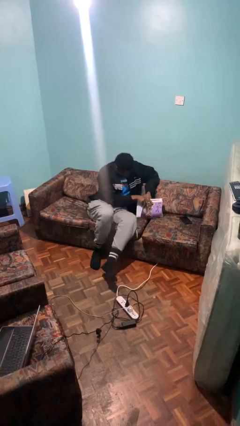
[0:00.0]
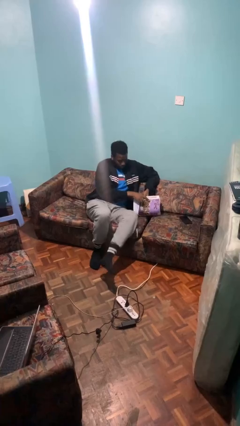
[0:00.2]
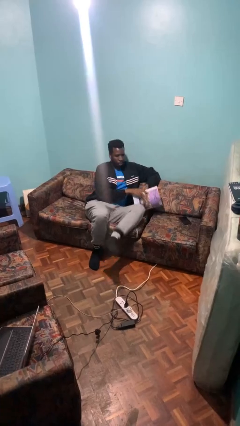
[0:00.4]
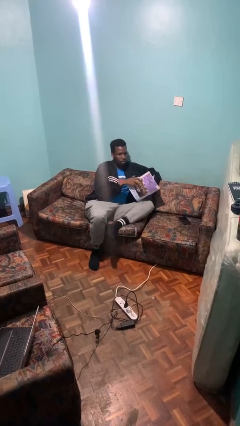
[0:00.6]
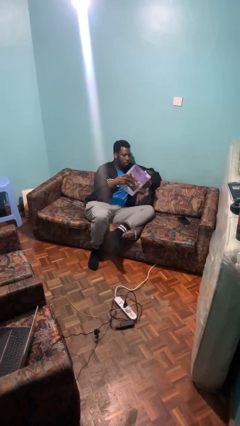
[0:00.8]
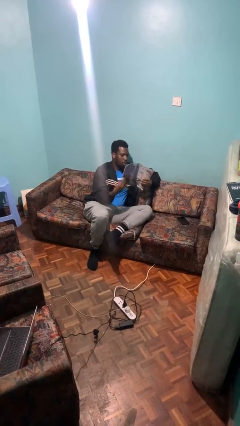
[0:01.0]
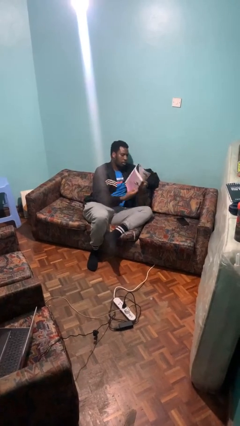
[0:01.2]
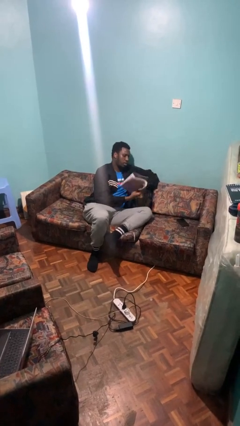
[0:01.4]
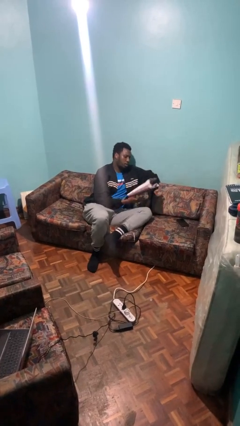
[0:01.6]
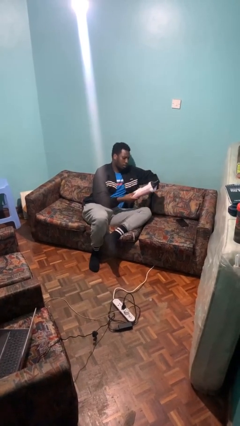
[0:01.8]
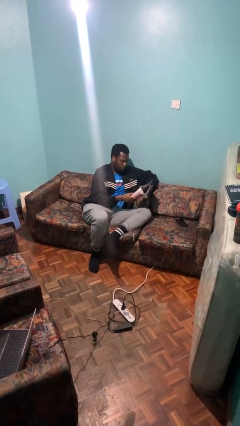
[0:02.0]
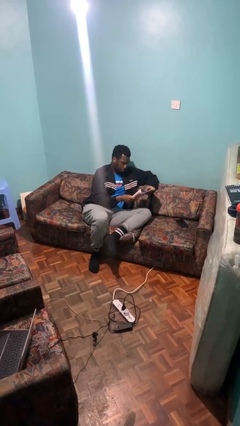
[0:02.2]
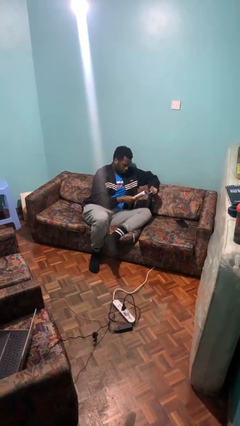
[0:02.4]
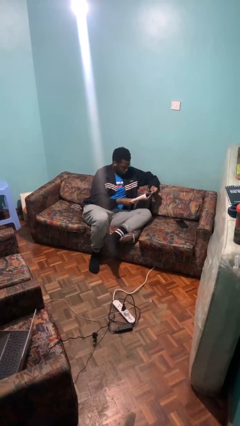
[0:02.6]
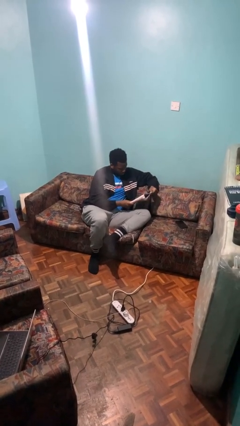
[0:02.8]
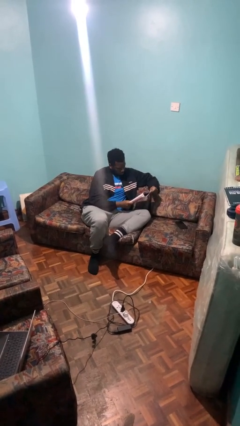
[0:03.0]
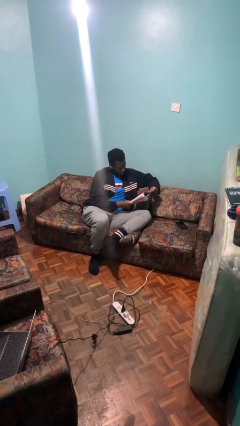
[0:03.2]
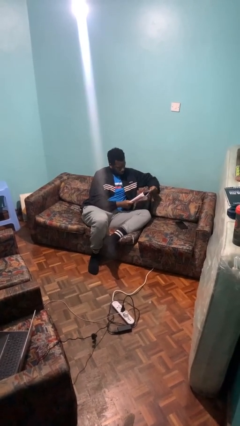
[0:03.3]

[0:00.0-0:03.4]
person reads magazine

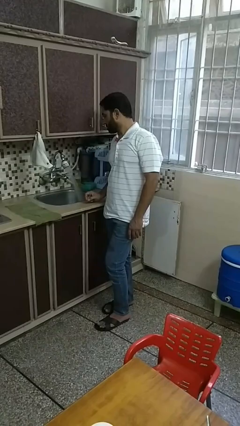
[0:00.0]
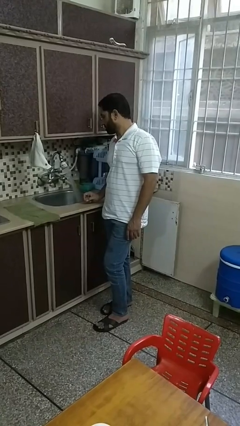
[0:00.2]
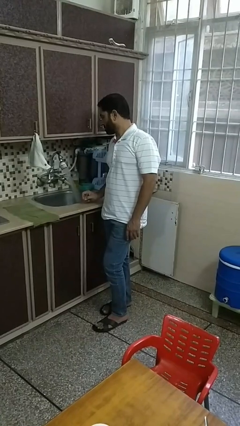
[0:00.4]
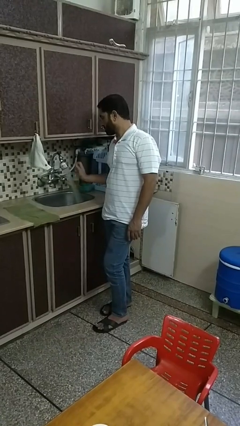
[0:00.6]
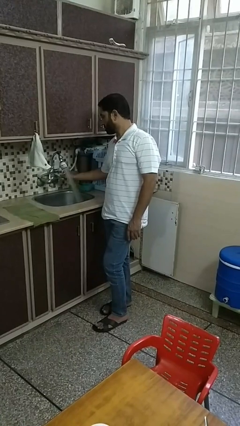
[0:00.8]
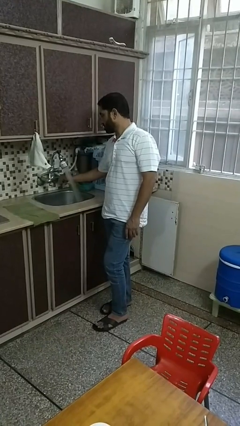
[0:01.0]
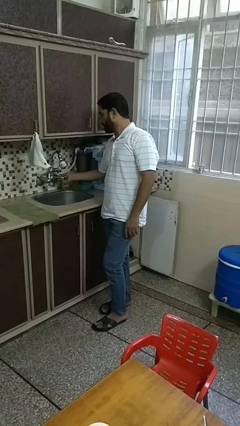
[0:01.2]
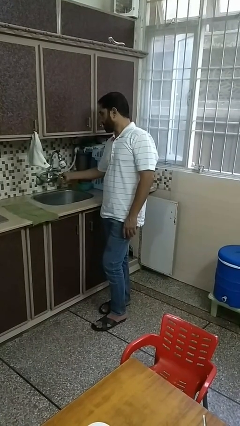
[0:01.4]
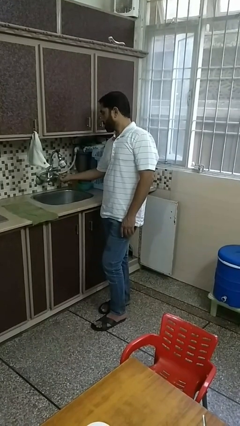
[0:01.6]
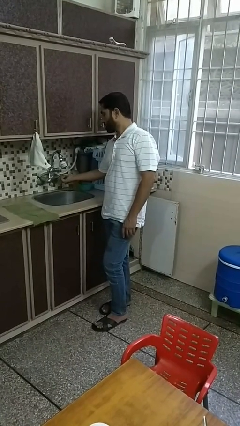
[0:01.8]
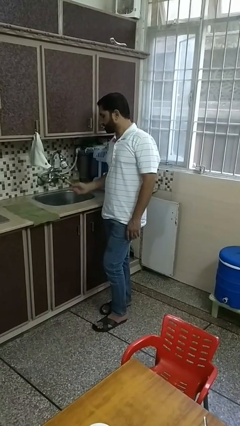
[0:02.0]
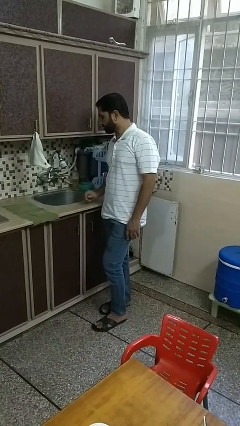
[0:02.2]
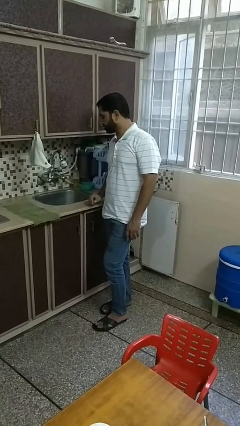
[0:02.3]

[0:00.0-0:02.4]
person turns off faucet

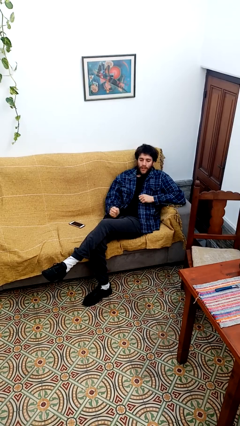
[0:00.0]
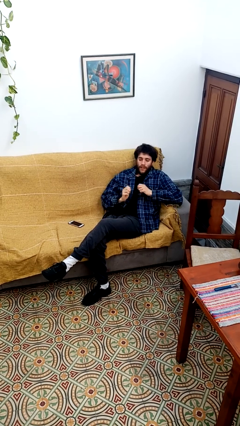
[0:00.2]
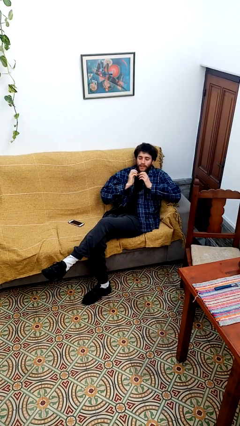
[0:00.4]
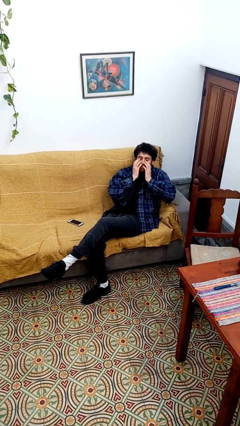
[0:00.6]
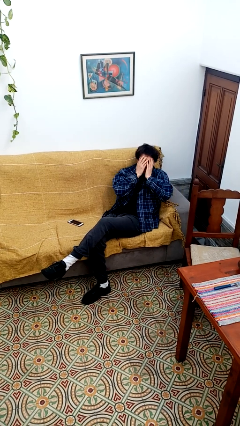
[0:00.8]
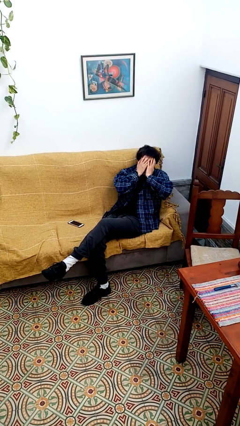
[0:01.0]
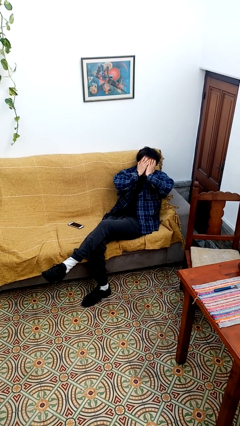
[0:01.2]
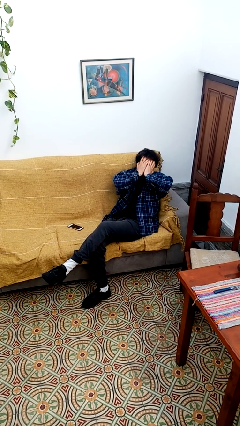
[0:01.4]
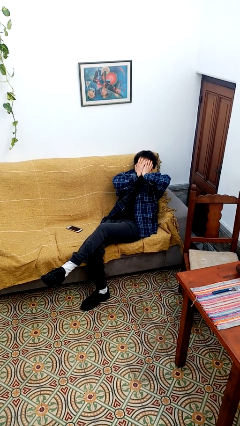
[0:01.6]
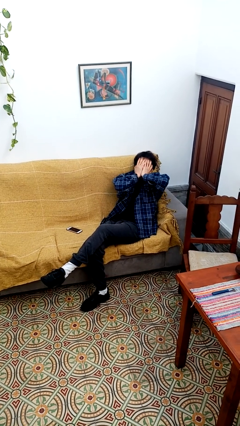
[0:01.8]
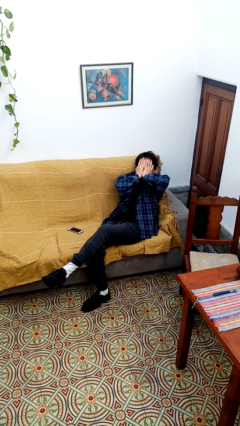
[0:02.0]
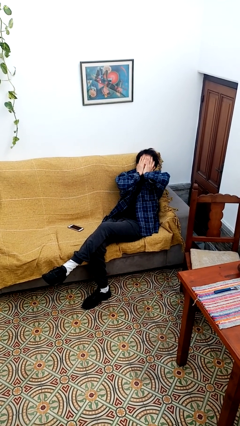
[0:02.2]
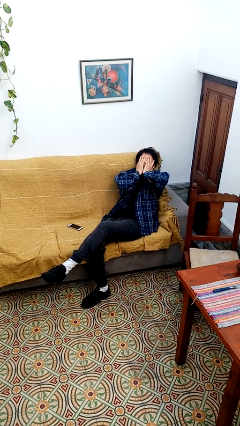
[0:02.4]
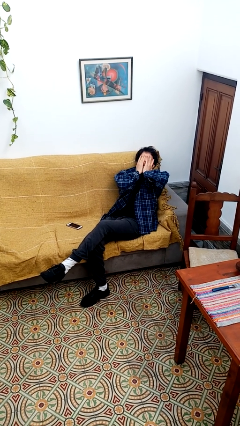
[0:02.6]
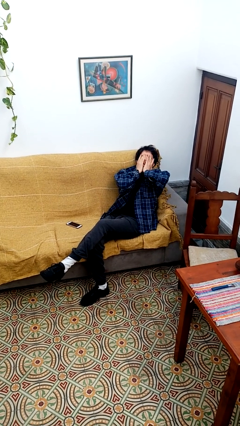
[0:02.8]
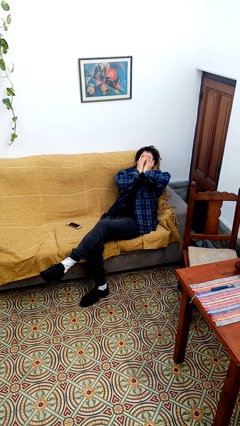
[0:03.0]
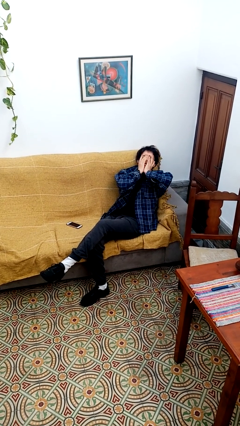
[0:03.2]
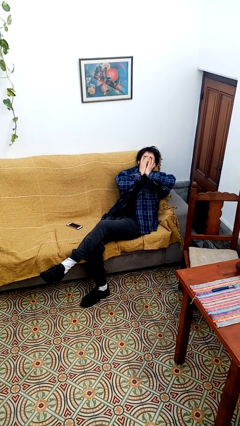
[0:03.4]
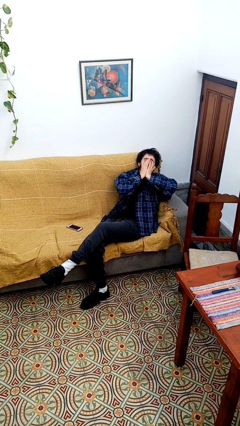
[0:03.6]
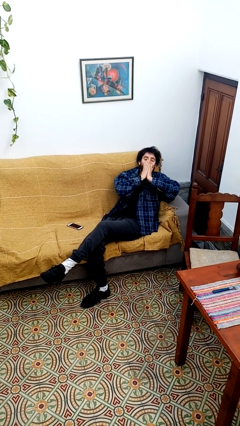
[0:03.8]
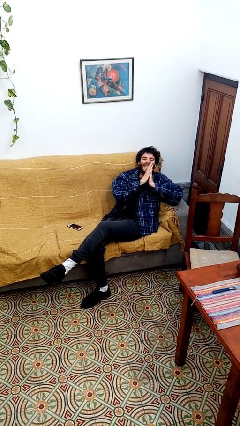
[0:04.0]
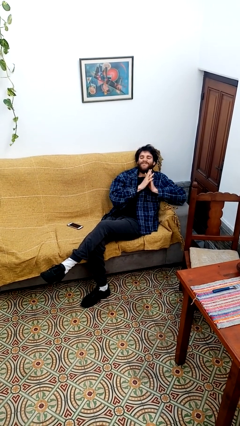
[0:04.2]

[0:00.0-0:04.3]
person yawns

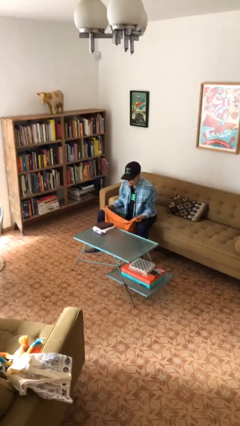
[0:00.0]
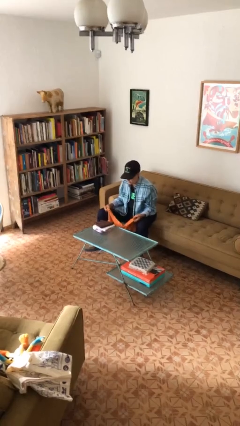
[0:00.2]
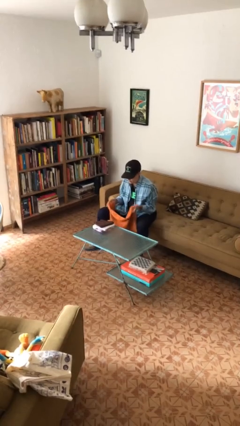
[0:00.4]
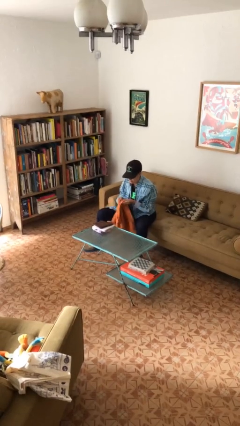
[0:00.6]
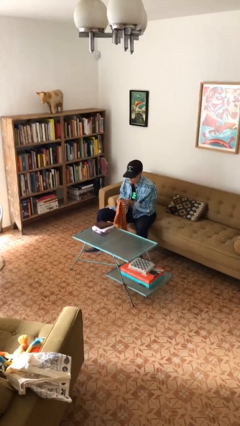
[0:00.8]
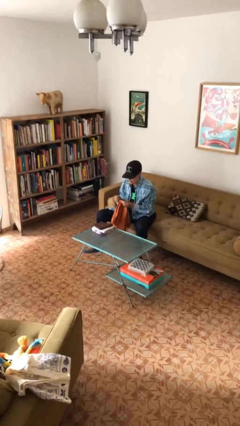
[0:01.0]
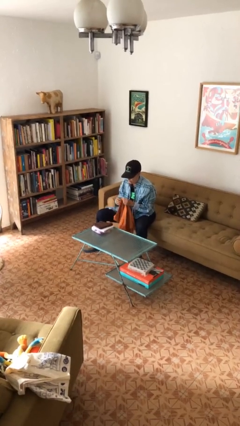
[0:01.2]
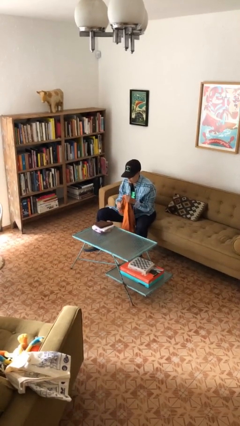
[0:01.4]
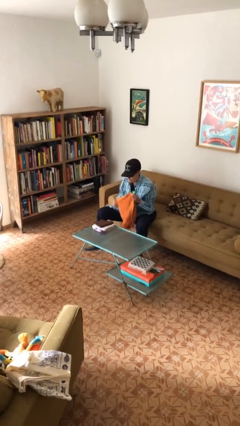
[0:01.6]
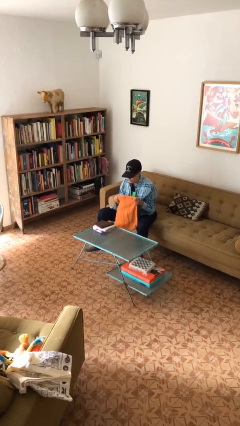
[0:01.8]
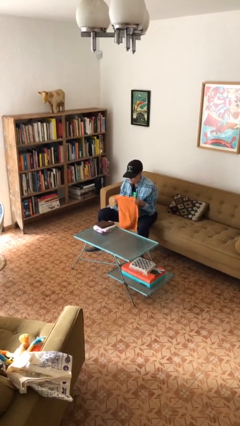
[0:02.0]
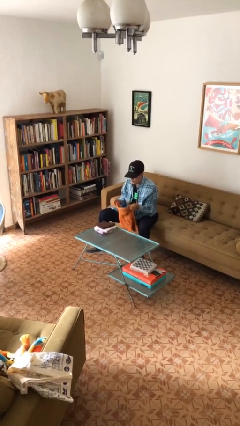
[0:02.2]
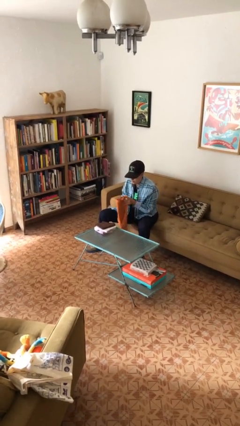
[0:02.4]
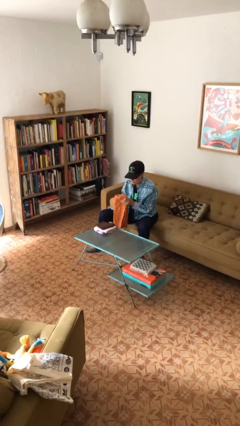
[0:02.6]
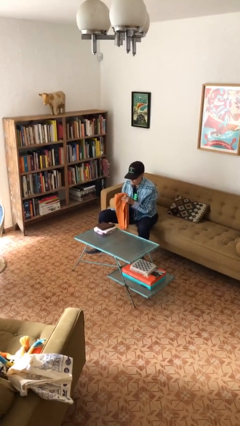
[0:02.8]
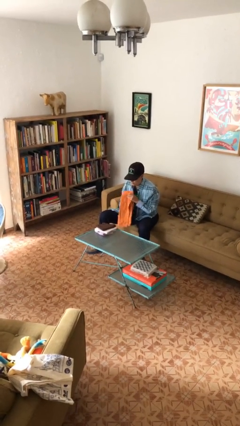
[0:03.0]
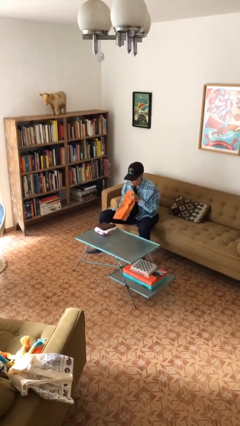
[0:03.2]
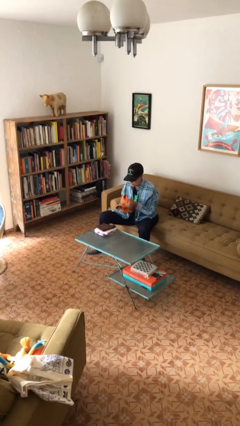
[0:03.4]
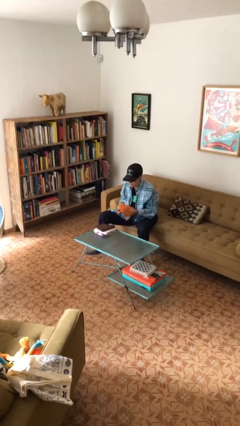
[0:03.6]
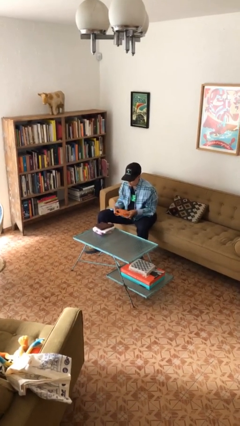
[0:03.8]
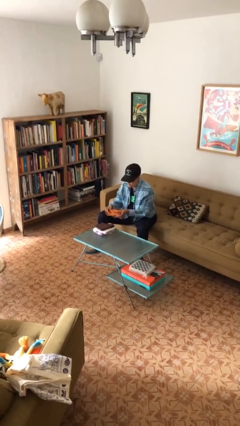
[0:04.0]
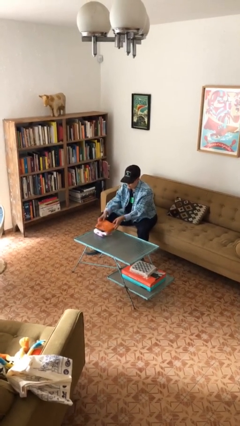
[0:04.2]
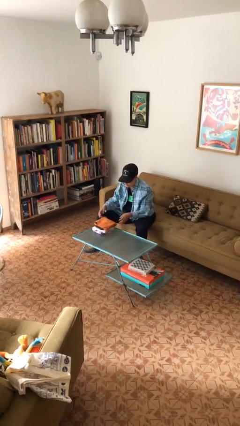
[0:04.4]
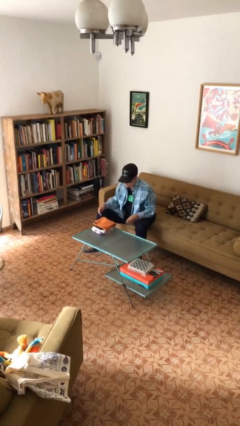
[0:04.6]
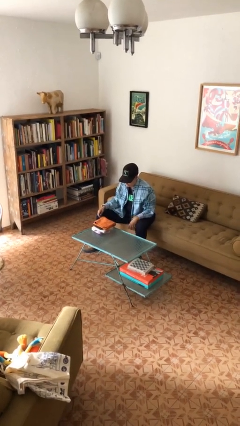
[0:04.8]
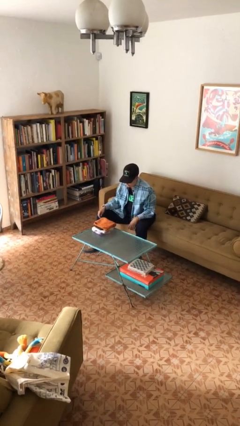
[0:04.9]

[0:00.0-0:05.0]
person folds towel

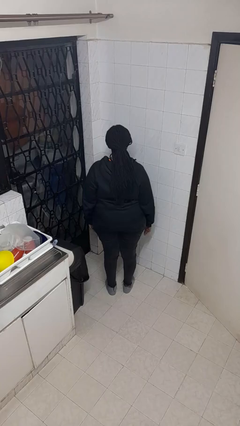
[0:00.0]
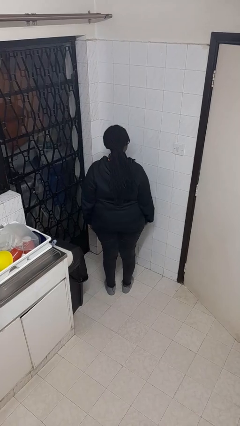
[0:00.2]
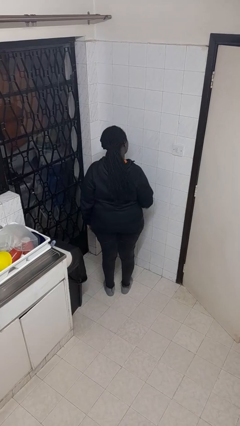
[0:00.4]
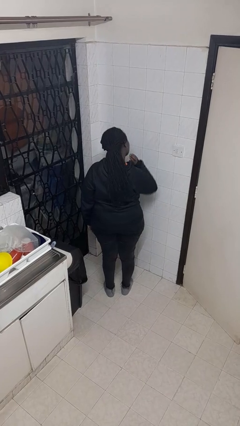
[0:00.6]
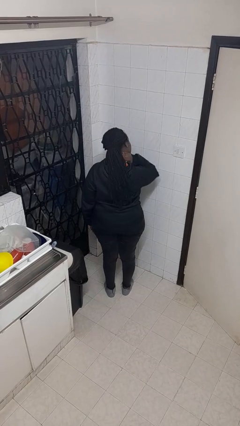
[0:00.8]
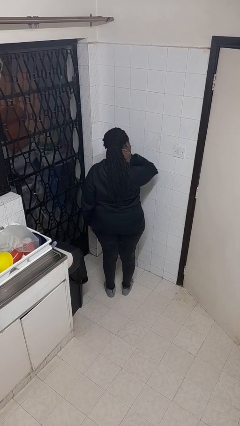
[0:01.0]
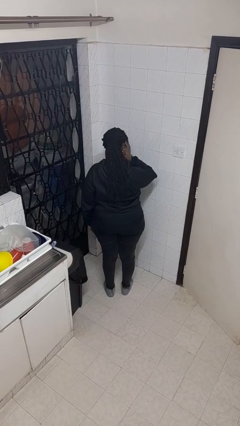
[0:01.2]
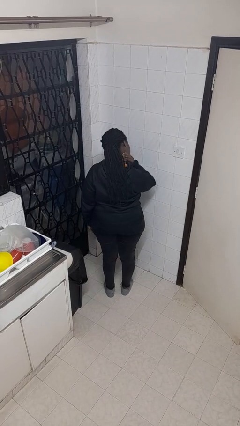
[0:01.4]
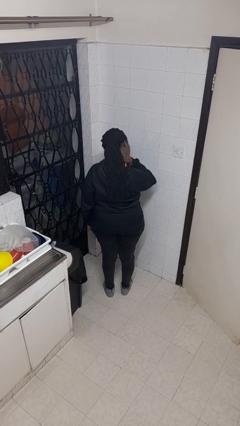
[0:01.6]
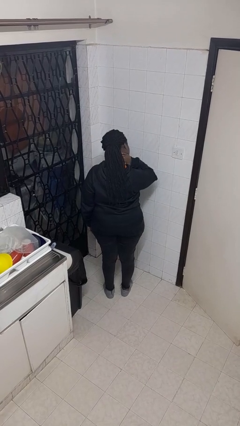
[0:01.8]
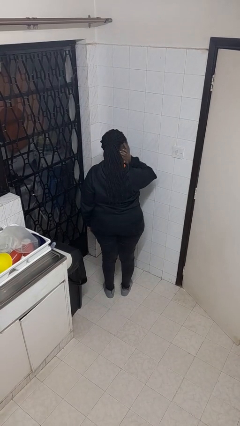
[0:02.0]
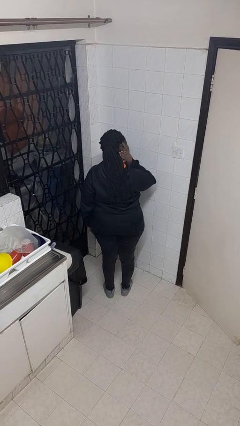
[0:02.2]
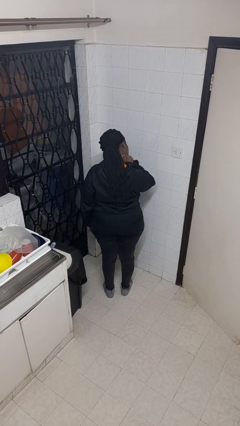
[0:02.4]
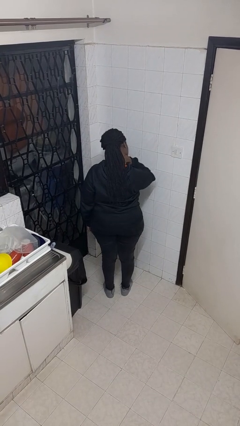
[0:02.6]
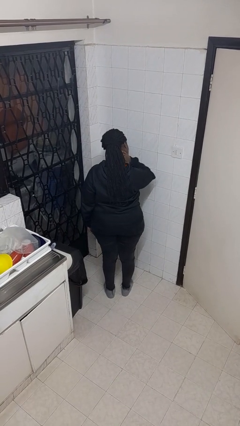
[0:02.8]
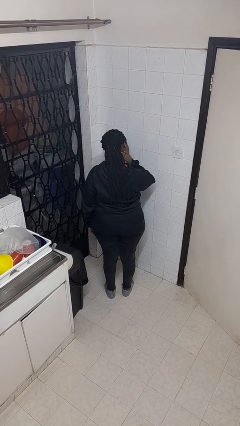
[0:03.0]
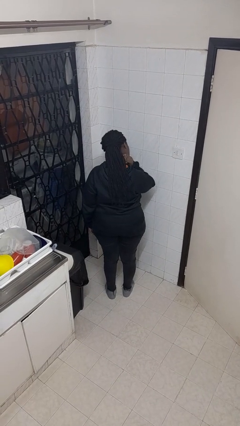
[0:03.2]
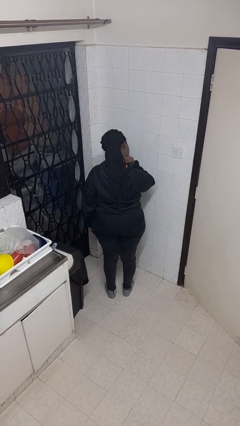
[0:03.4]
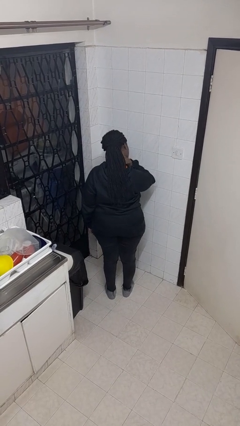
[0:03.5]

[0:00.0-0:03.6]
person rubs neck
